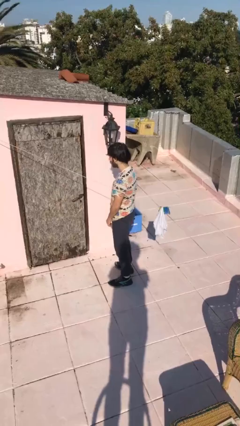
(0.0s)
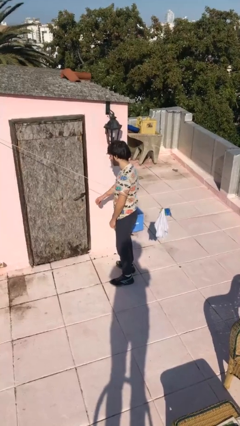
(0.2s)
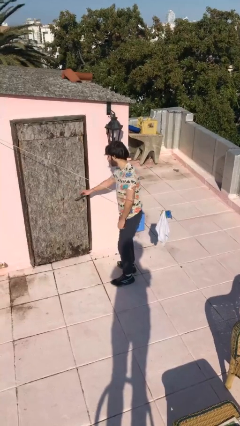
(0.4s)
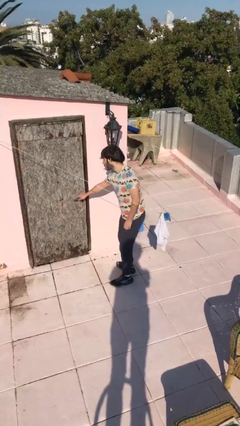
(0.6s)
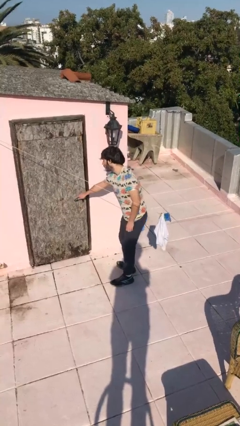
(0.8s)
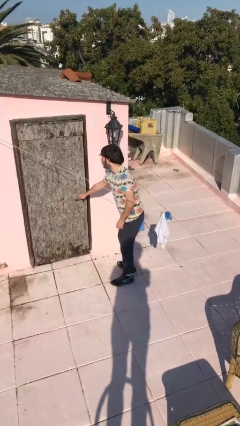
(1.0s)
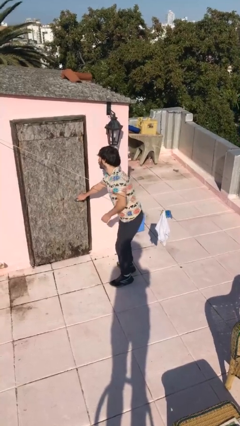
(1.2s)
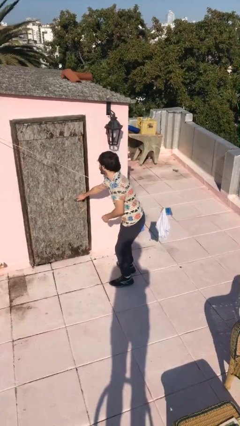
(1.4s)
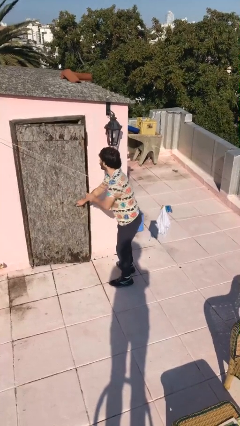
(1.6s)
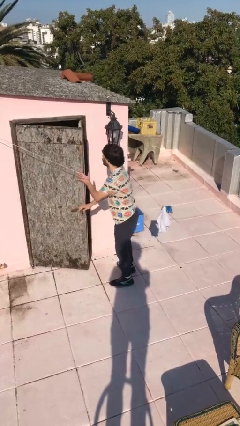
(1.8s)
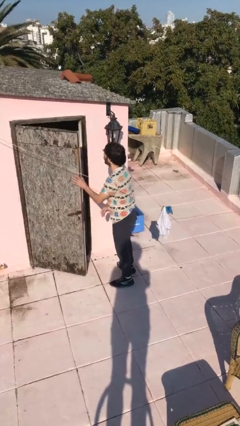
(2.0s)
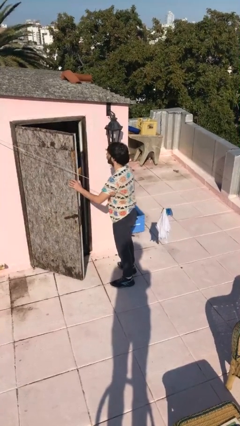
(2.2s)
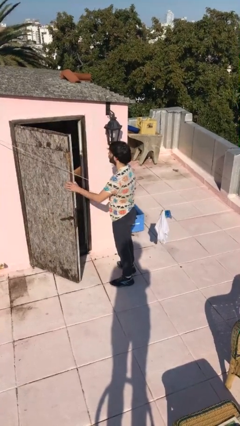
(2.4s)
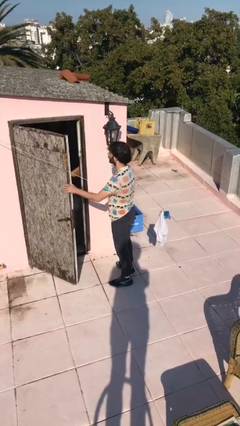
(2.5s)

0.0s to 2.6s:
person opens facility door

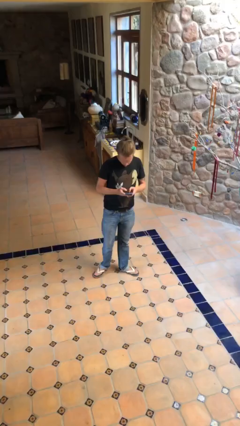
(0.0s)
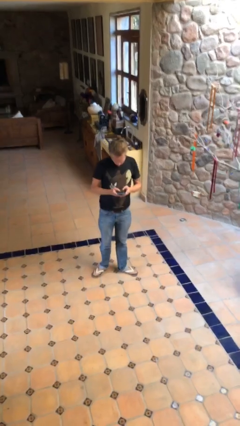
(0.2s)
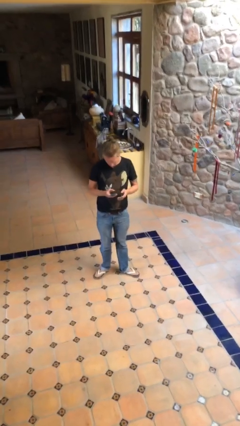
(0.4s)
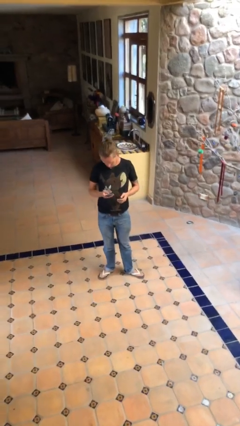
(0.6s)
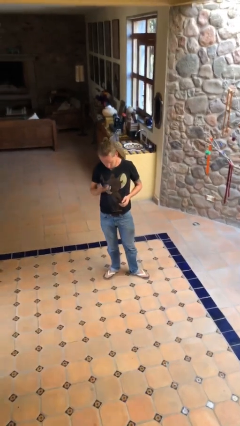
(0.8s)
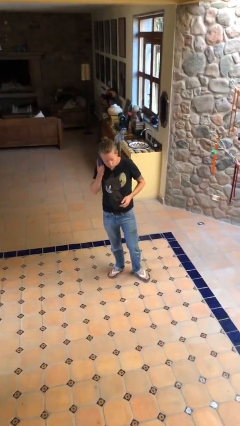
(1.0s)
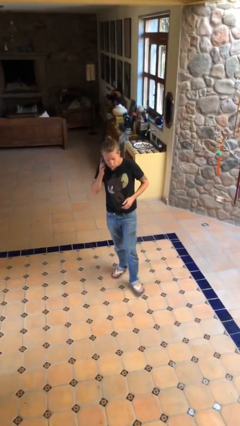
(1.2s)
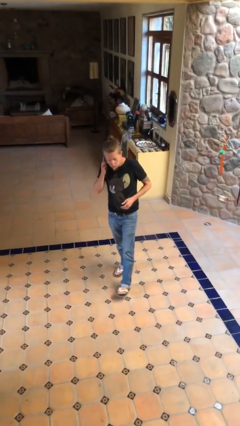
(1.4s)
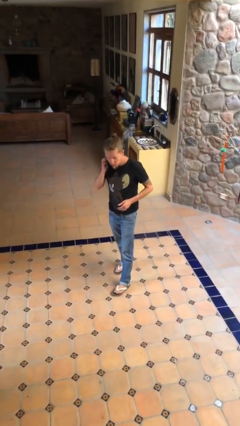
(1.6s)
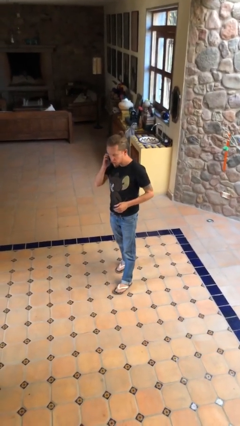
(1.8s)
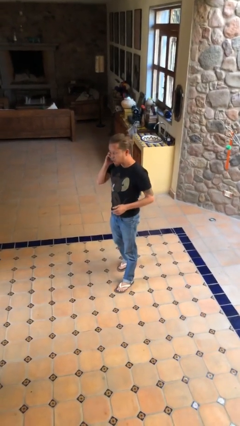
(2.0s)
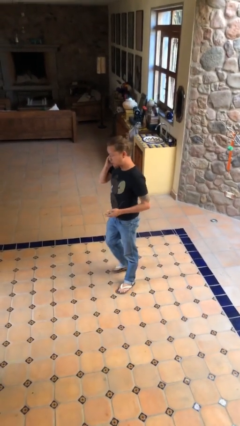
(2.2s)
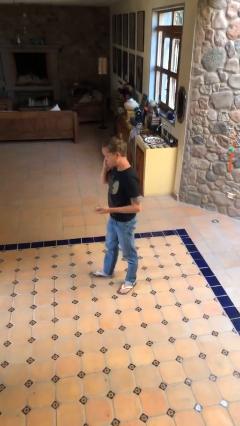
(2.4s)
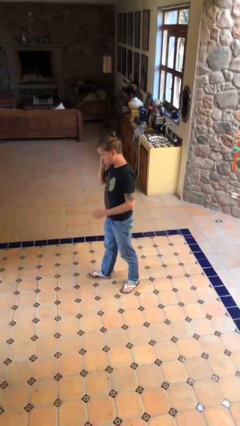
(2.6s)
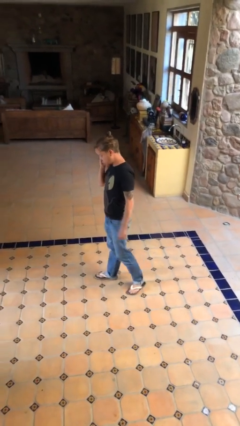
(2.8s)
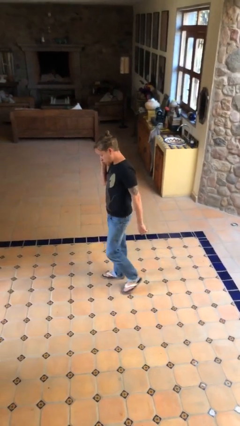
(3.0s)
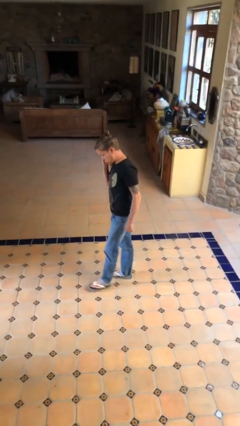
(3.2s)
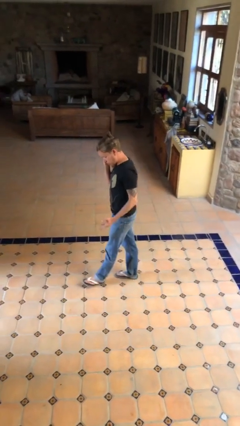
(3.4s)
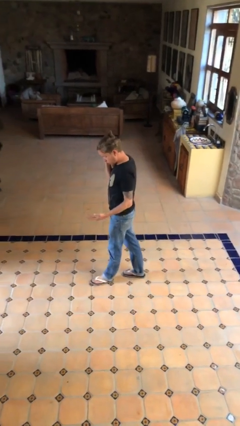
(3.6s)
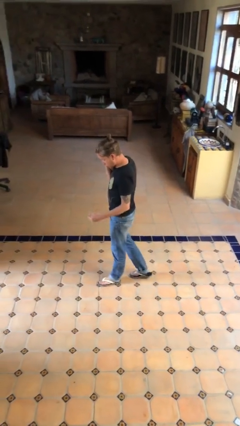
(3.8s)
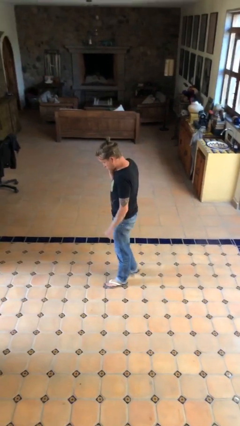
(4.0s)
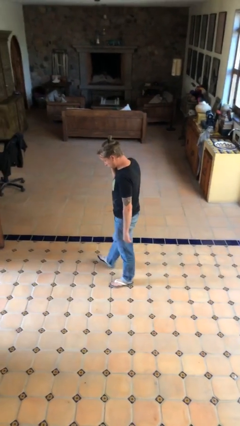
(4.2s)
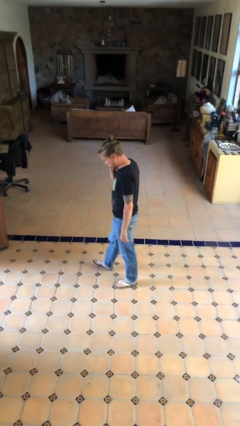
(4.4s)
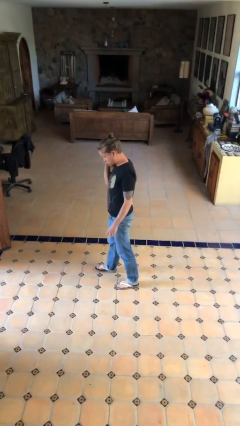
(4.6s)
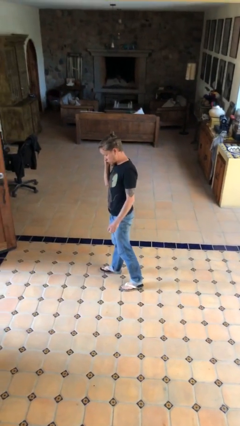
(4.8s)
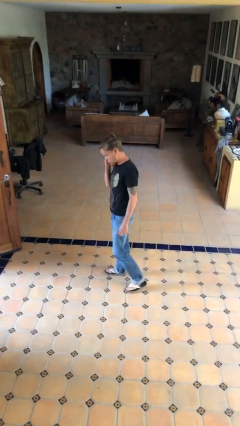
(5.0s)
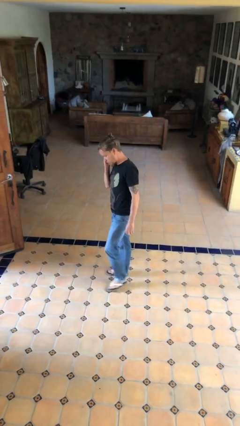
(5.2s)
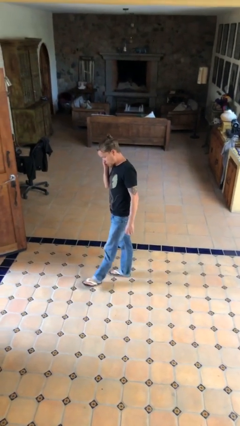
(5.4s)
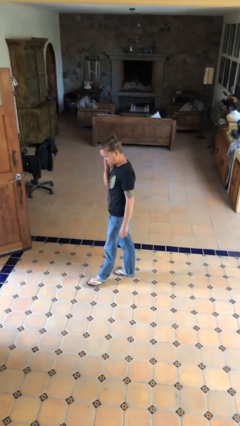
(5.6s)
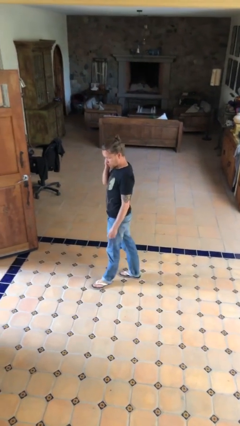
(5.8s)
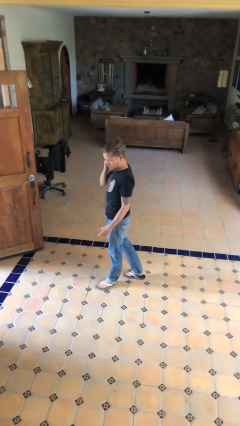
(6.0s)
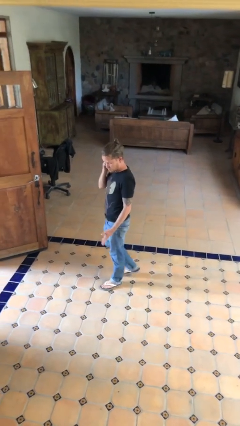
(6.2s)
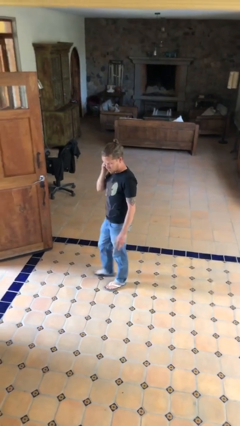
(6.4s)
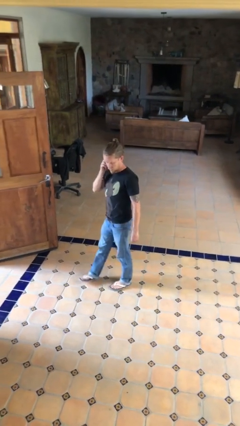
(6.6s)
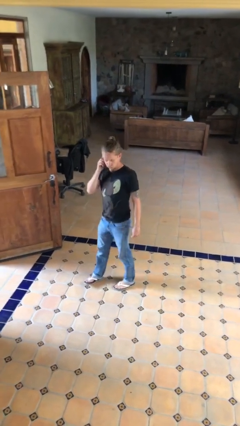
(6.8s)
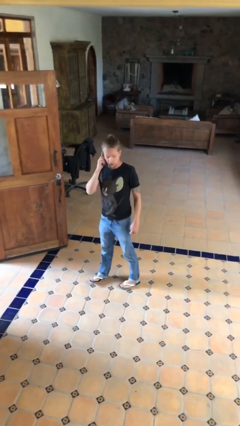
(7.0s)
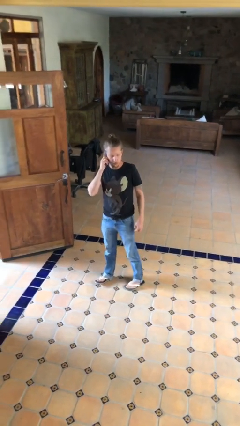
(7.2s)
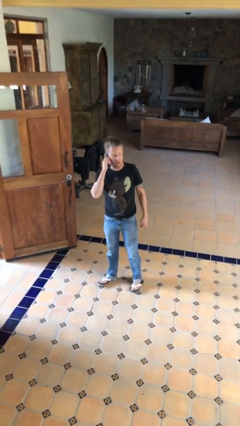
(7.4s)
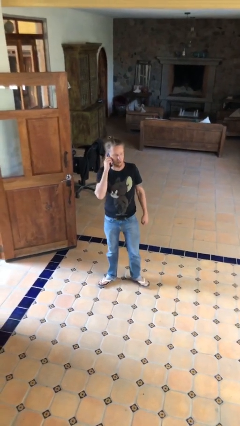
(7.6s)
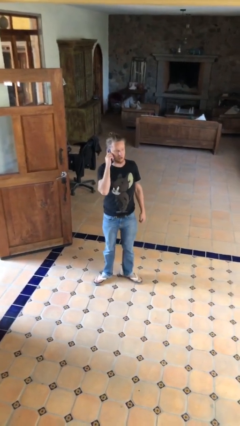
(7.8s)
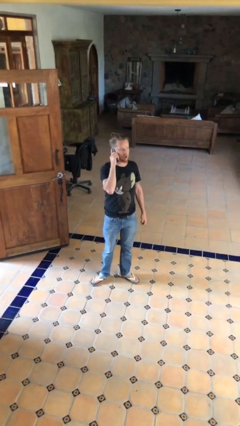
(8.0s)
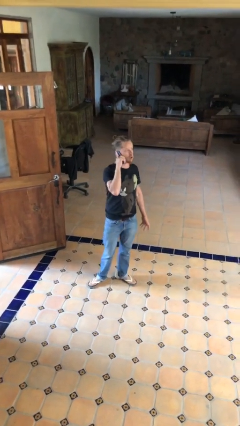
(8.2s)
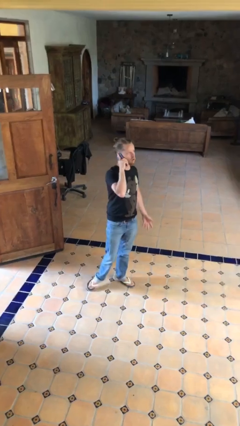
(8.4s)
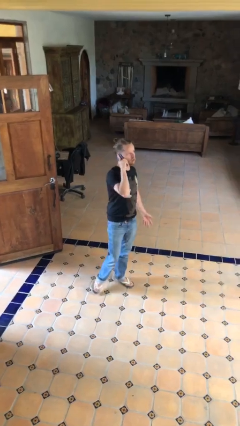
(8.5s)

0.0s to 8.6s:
person talks on phone

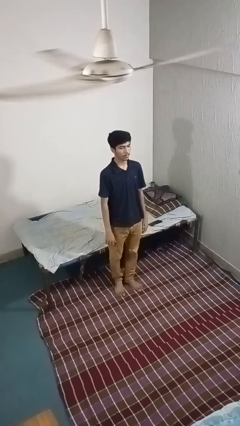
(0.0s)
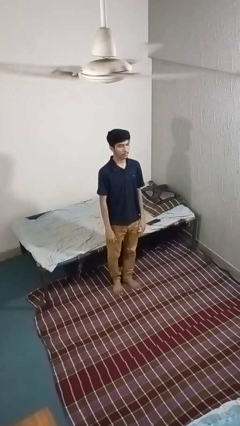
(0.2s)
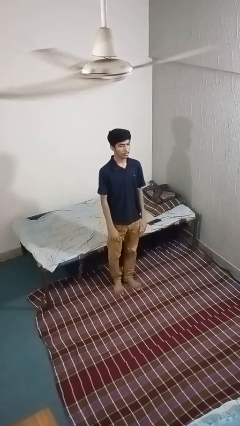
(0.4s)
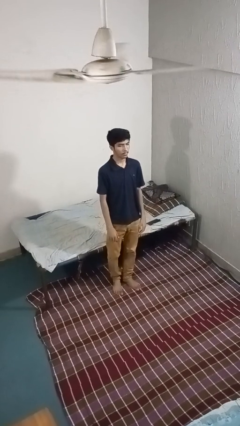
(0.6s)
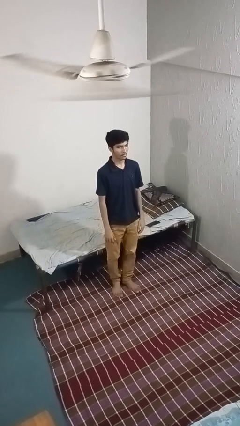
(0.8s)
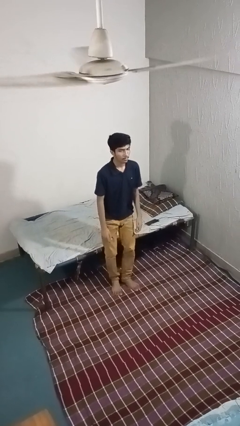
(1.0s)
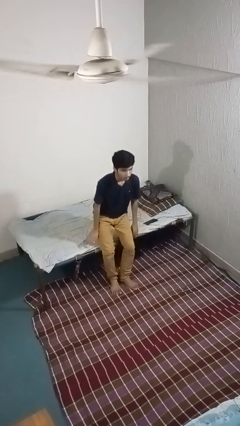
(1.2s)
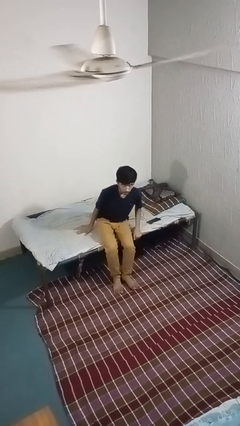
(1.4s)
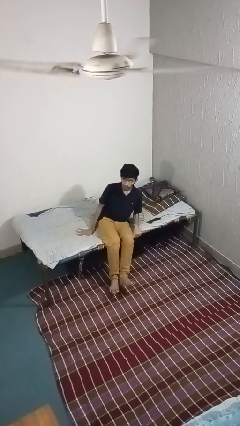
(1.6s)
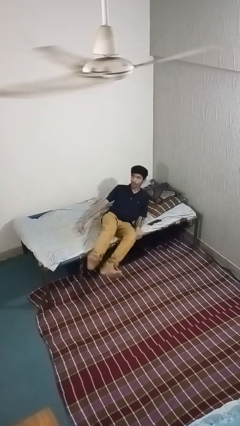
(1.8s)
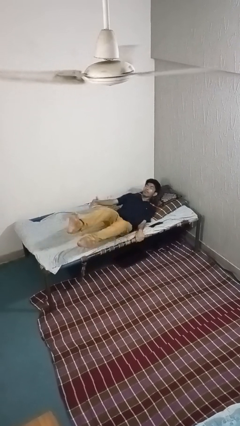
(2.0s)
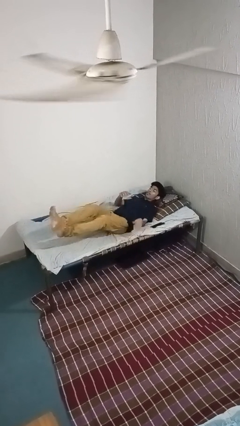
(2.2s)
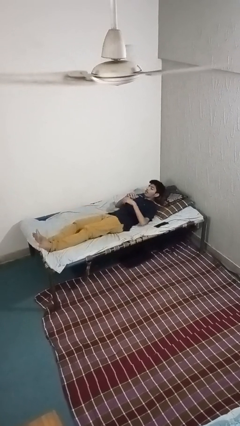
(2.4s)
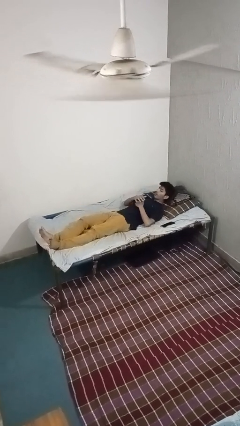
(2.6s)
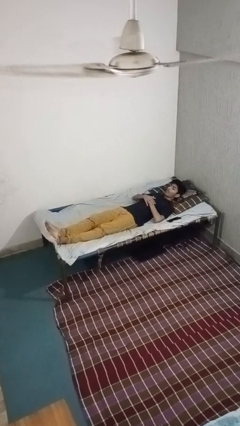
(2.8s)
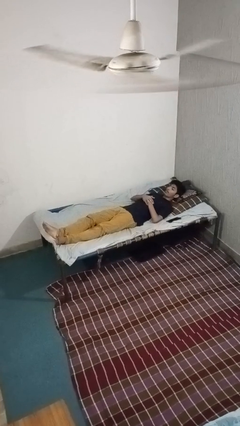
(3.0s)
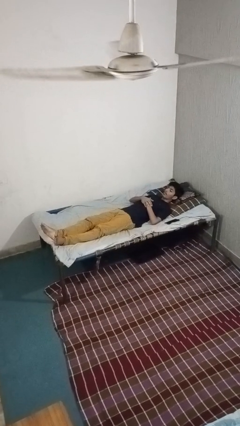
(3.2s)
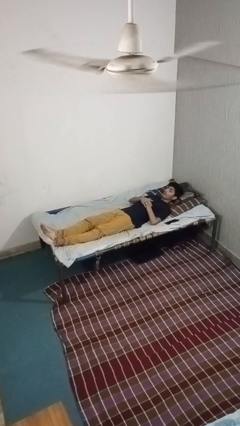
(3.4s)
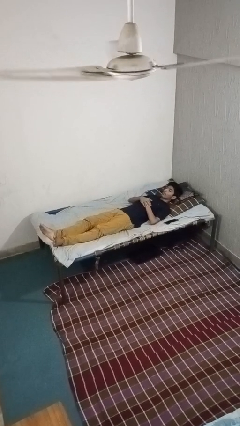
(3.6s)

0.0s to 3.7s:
person lies down on bed

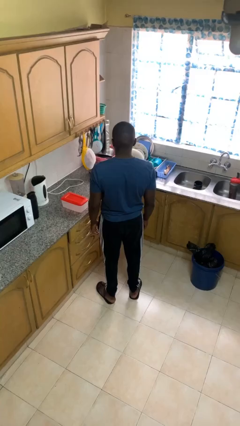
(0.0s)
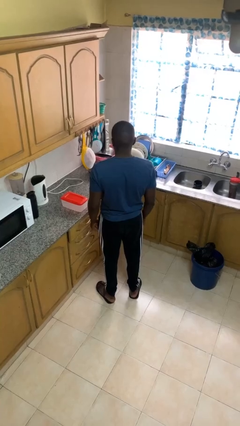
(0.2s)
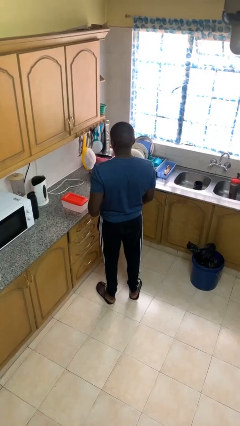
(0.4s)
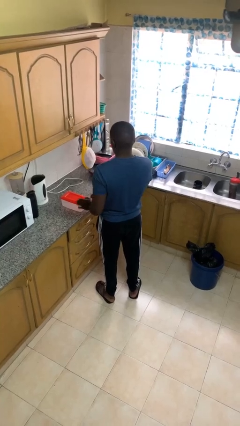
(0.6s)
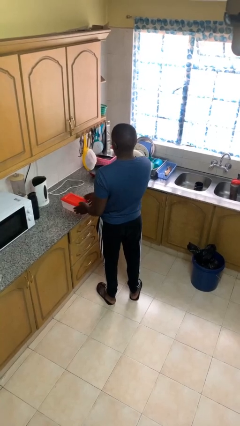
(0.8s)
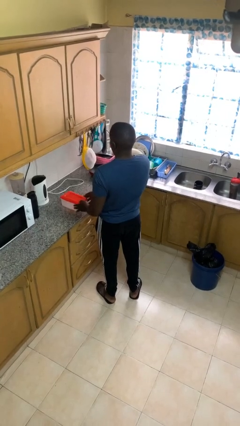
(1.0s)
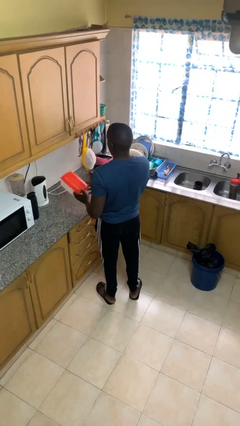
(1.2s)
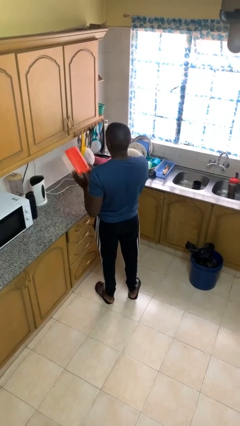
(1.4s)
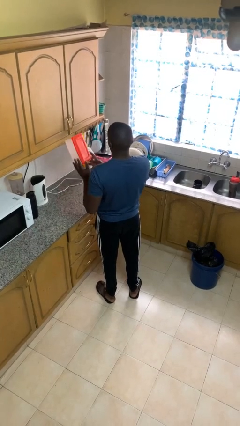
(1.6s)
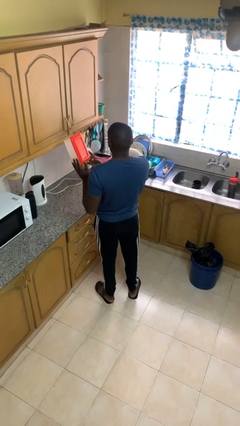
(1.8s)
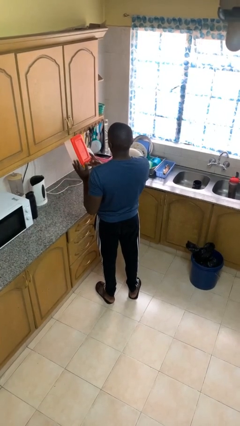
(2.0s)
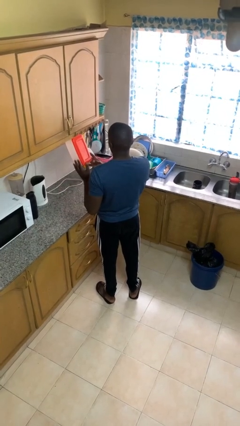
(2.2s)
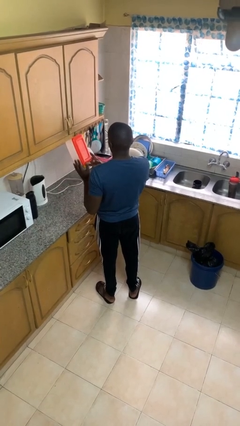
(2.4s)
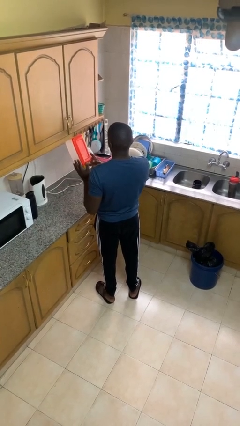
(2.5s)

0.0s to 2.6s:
person picks up object from countertop

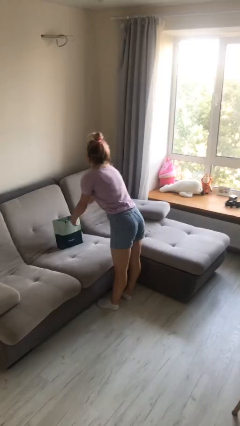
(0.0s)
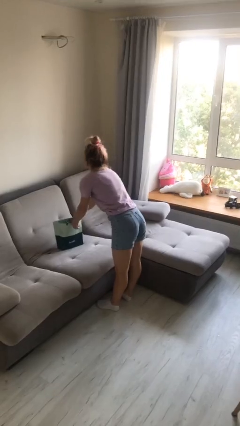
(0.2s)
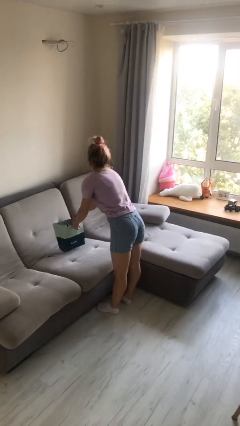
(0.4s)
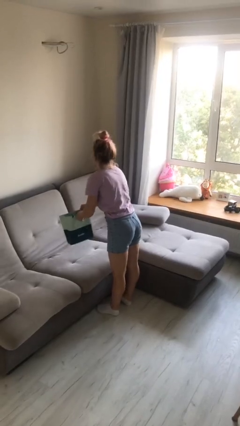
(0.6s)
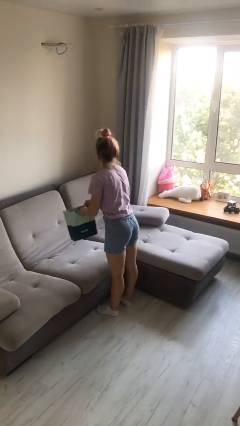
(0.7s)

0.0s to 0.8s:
person picks up object from couch
